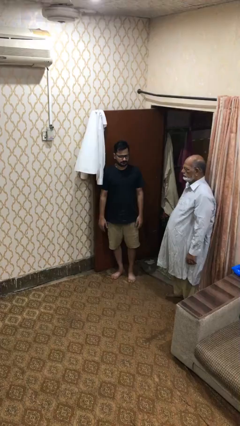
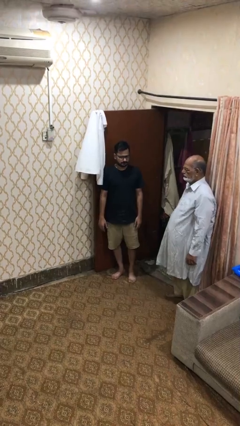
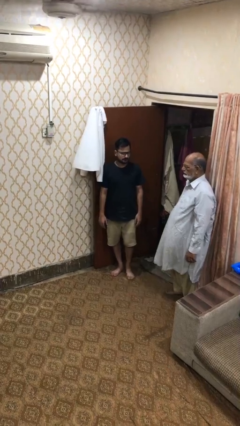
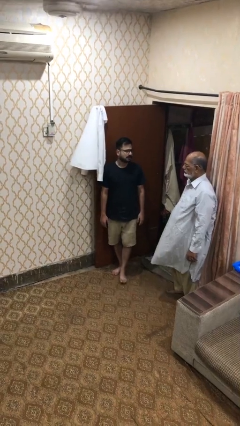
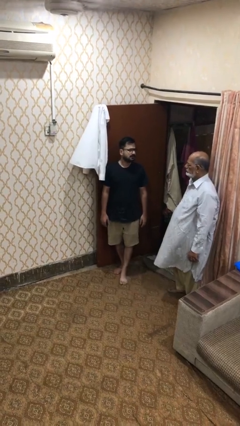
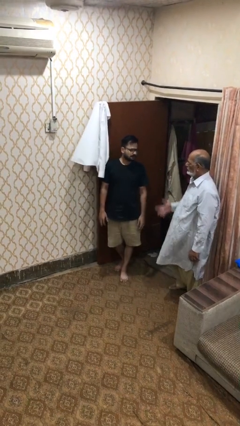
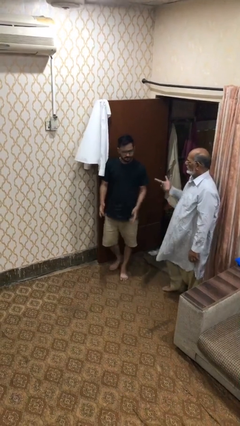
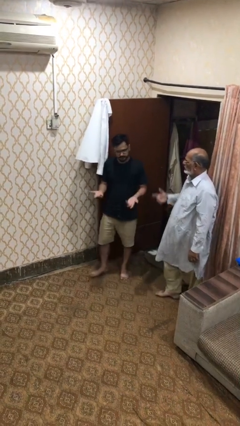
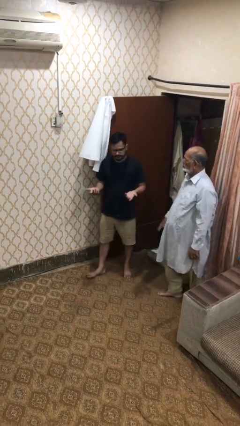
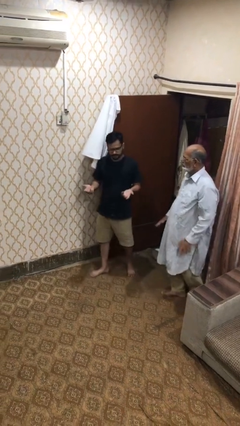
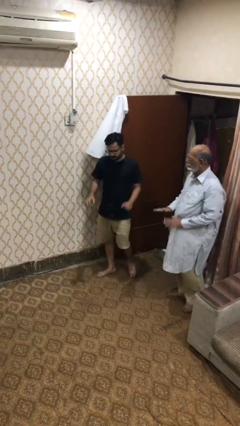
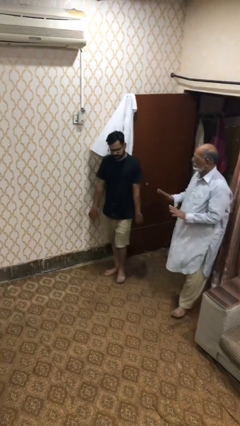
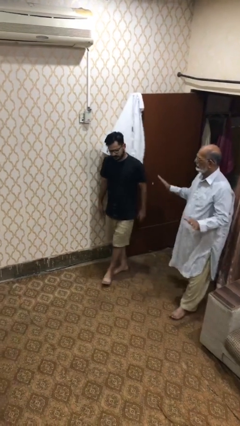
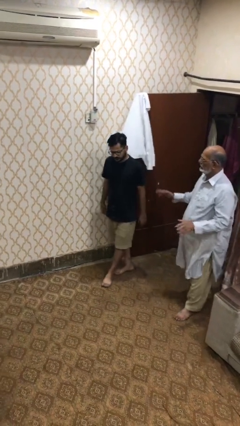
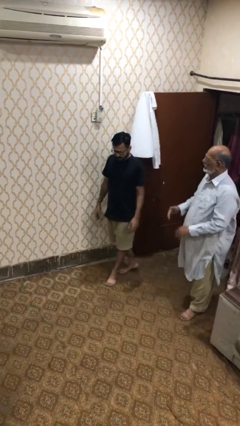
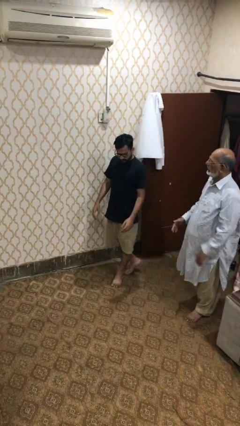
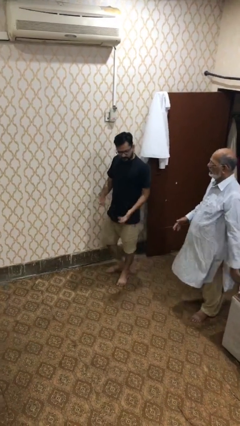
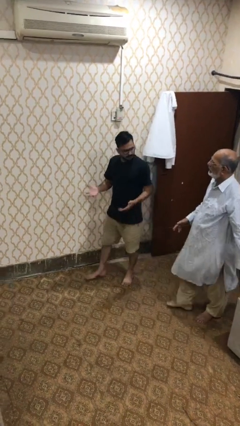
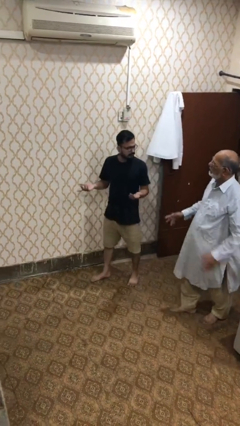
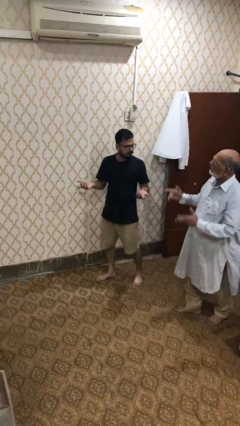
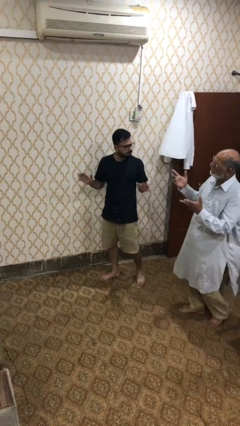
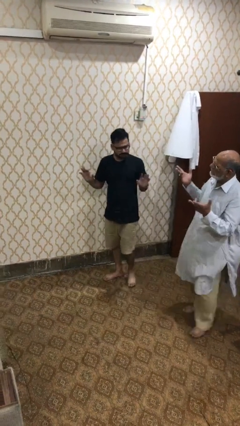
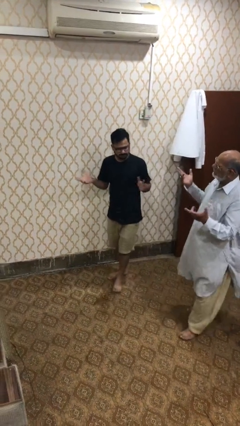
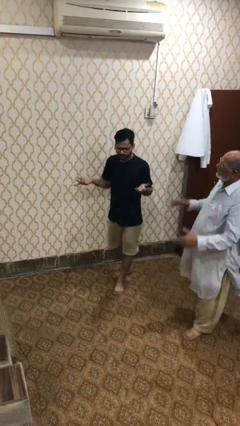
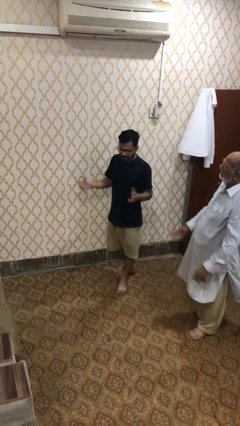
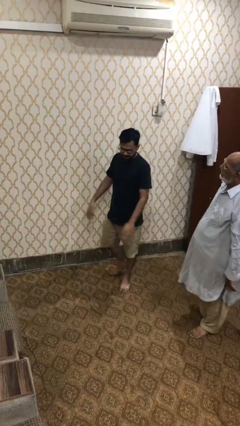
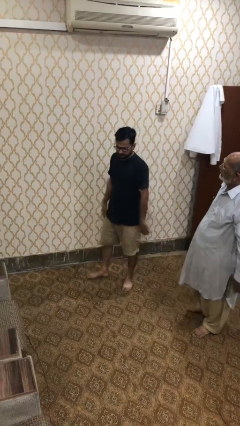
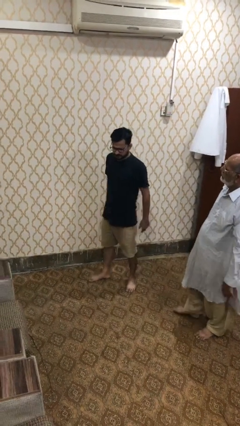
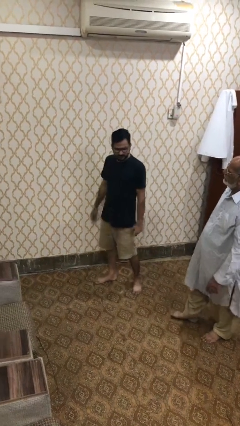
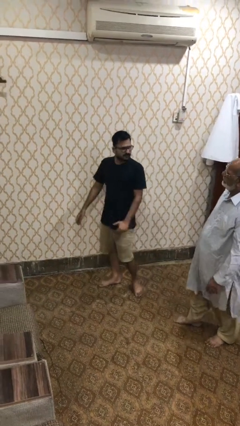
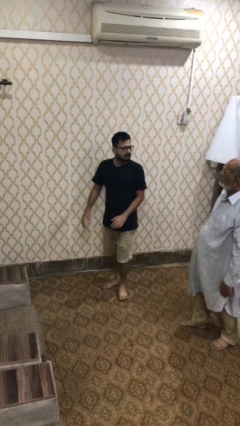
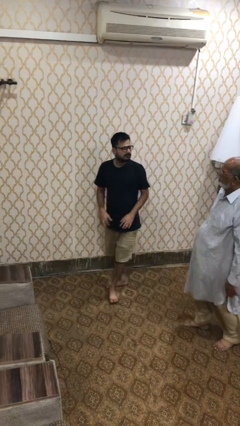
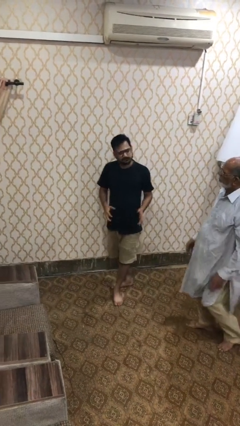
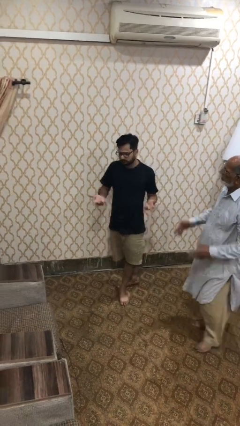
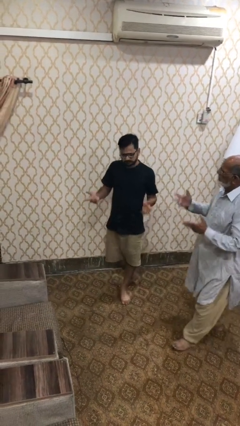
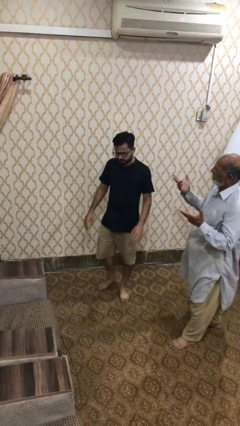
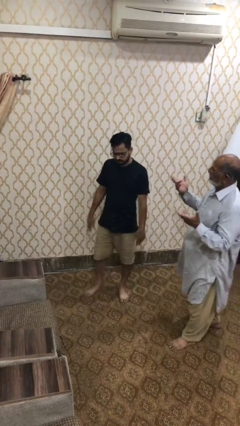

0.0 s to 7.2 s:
person talks to person

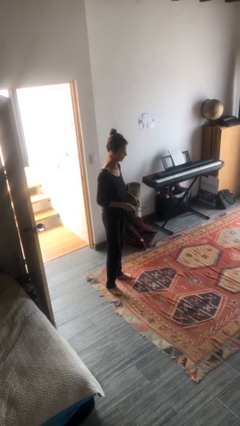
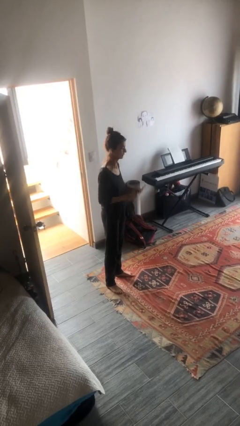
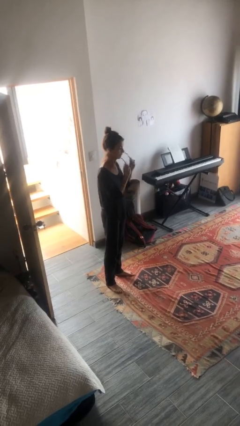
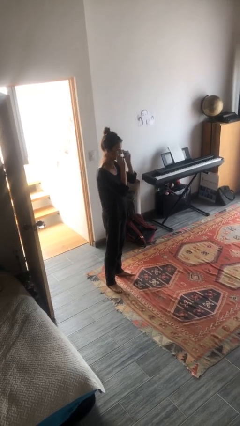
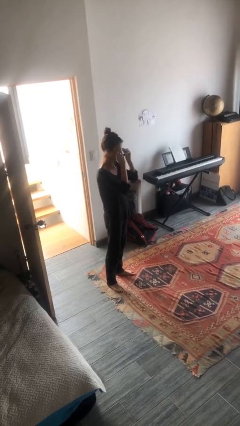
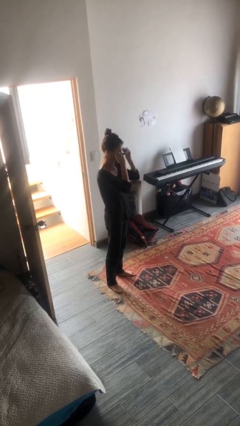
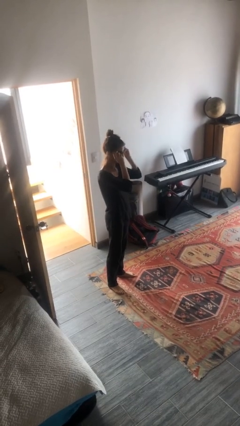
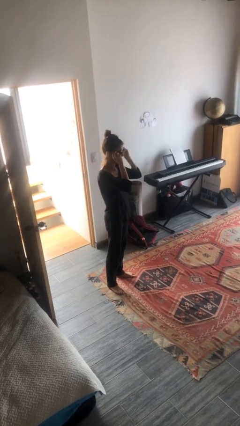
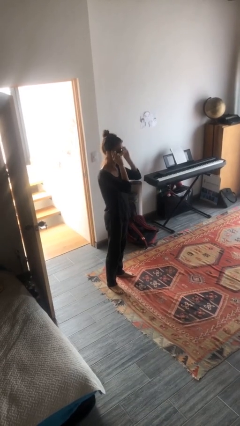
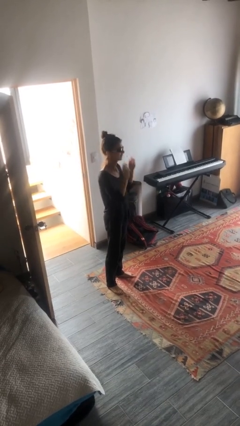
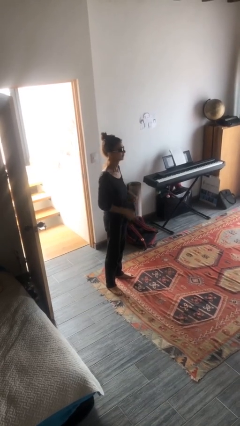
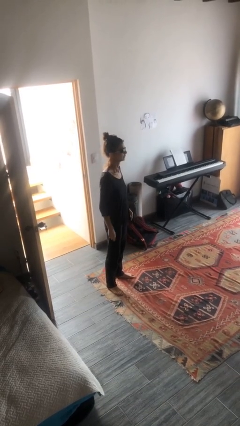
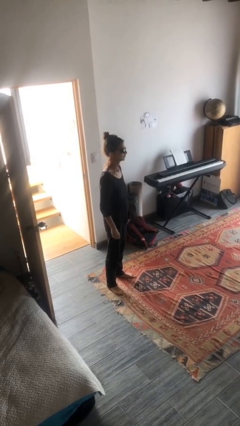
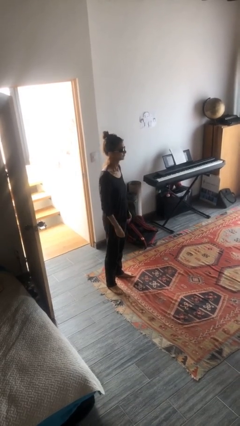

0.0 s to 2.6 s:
person puts on sunglasses

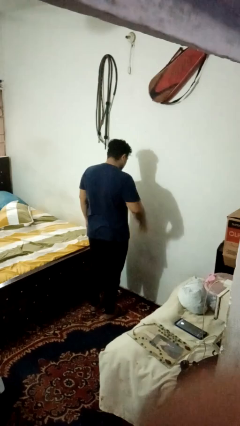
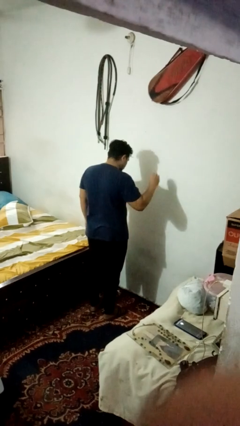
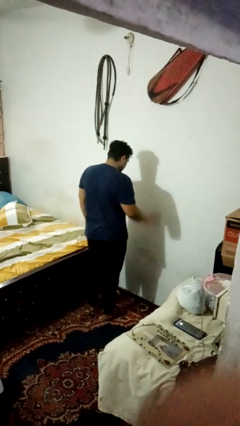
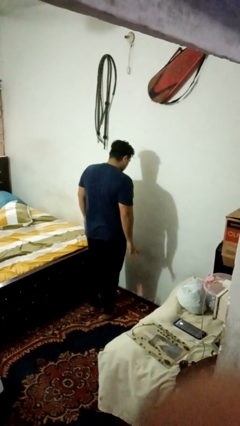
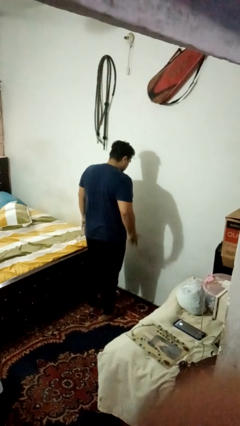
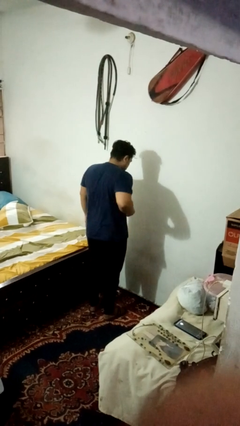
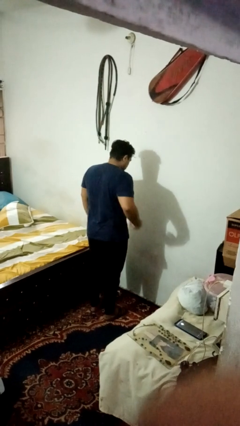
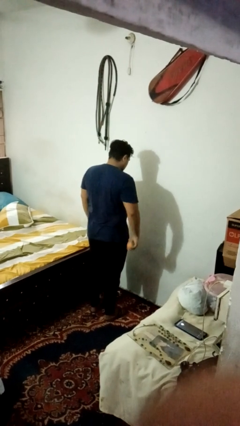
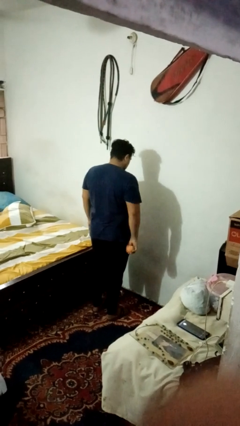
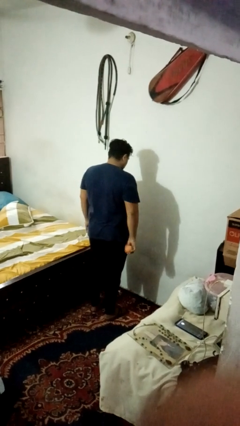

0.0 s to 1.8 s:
person bounces ball on floor

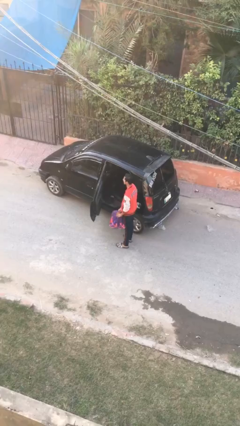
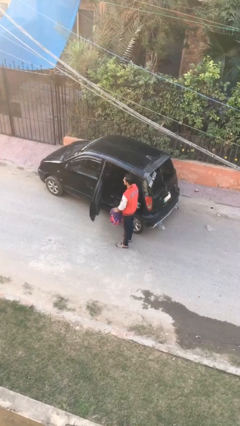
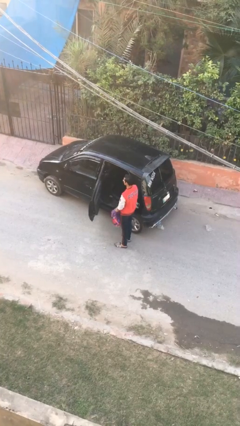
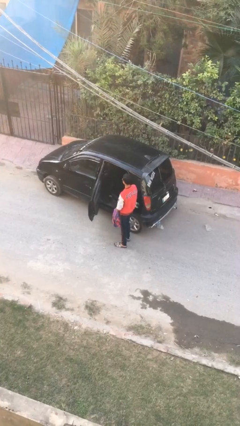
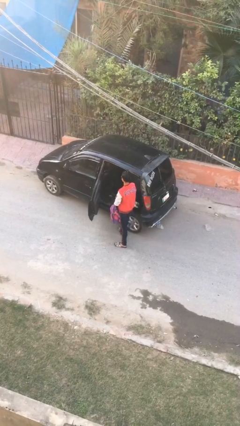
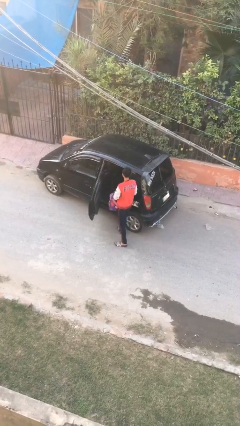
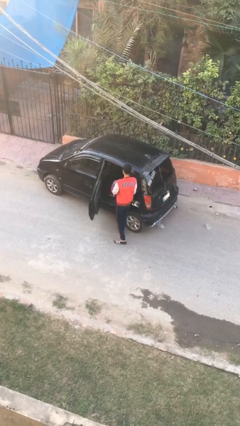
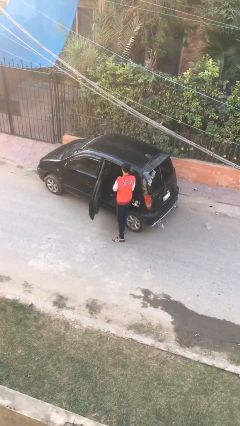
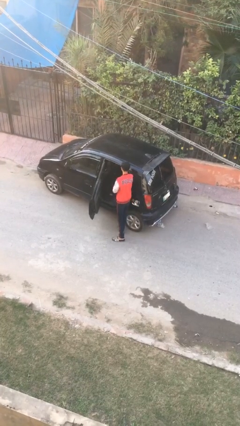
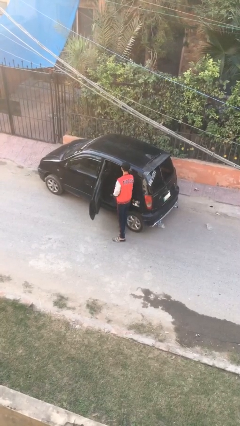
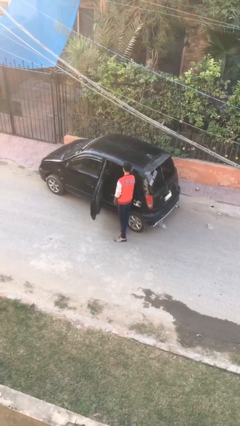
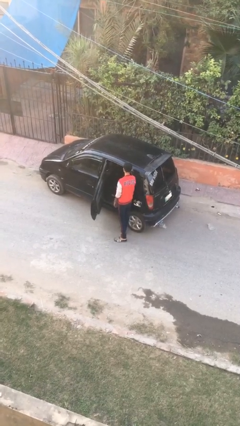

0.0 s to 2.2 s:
person loads car

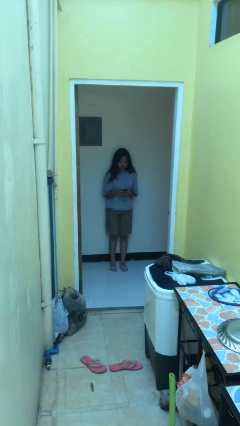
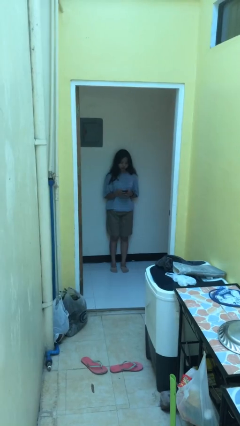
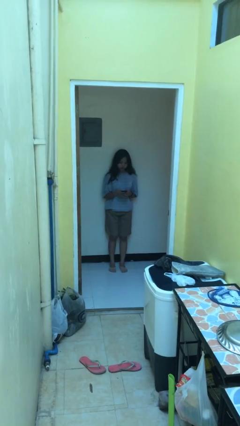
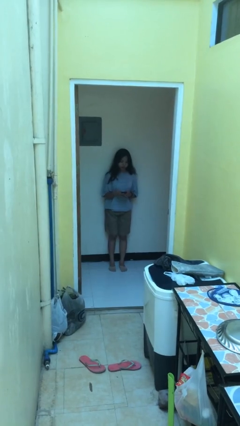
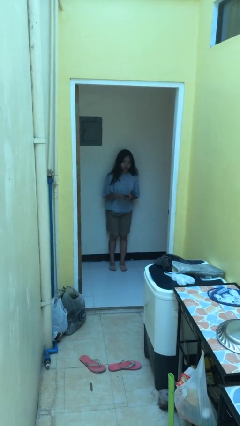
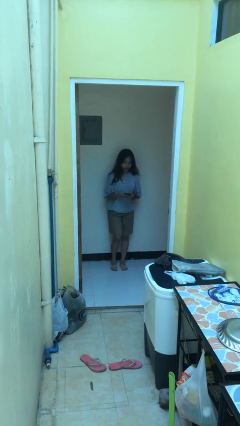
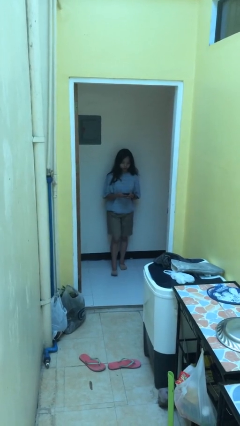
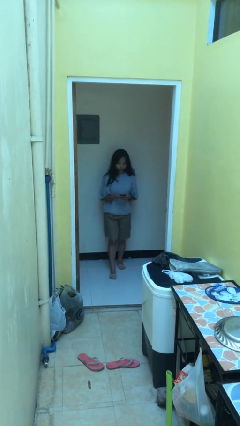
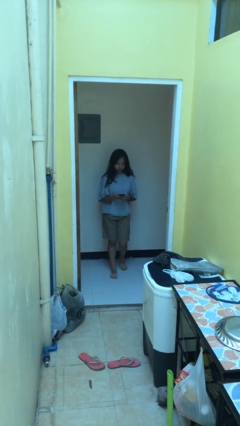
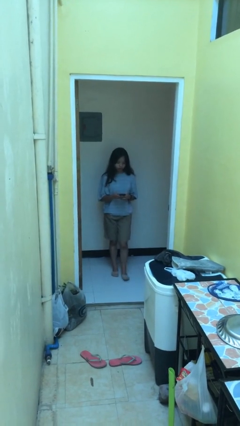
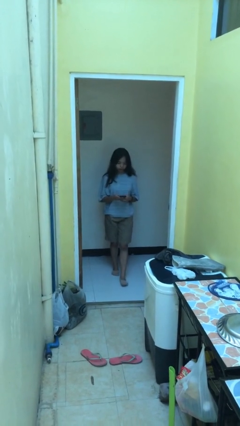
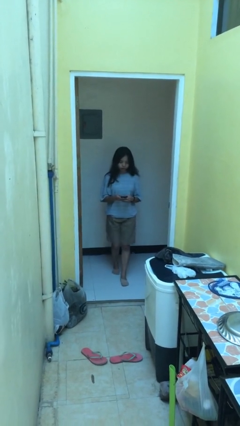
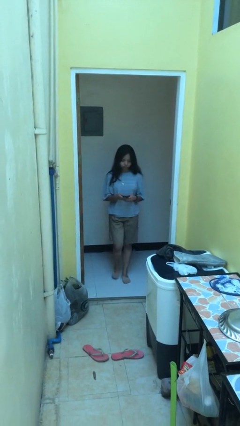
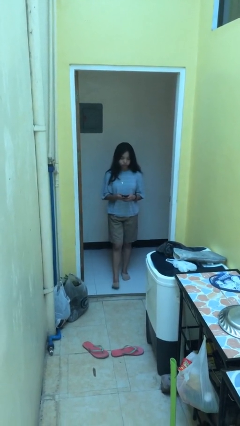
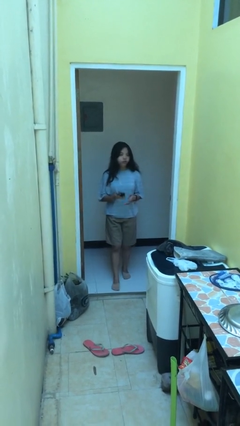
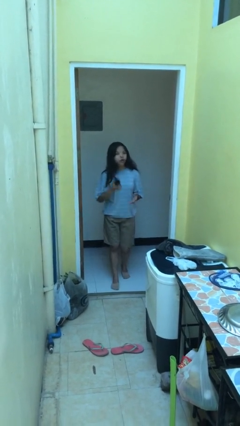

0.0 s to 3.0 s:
person texts on phone

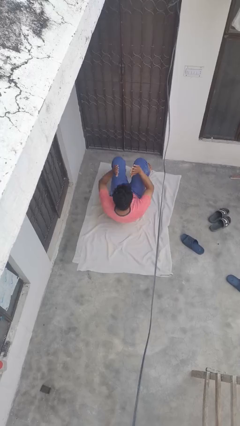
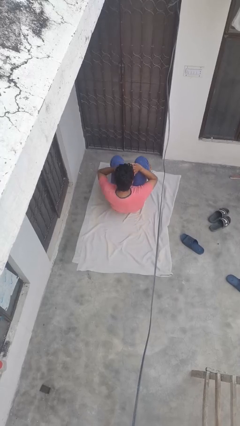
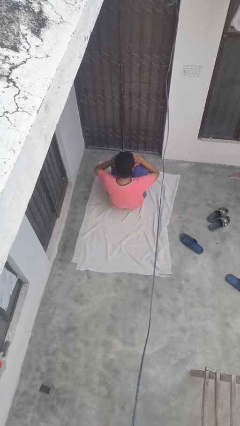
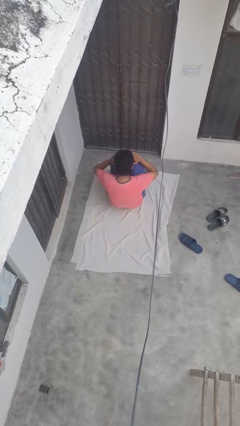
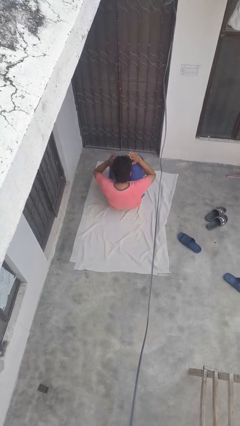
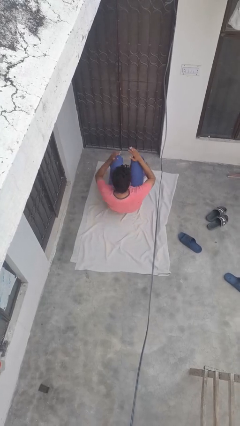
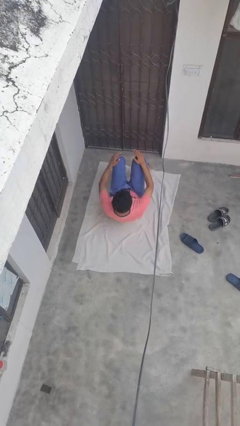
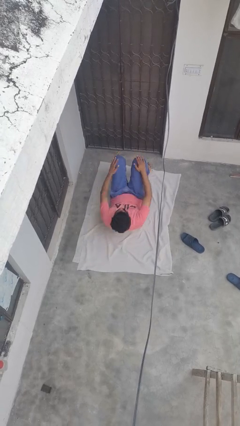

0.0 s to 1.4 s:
person exercises with situp
